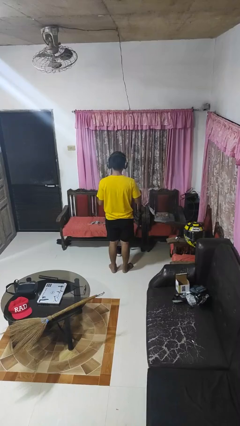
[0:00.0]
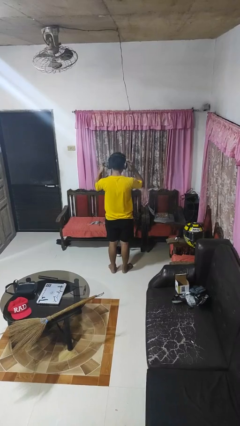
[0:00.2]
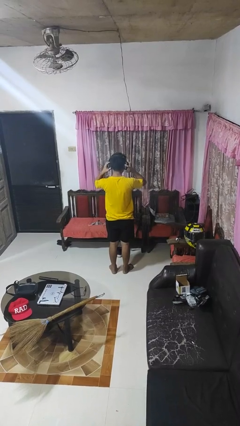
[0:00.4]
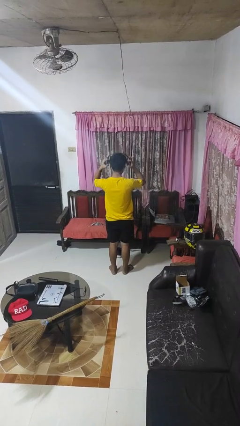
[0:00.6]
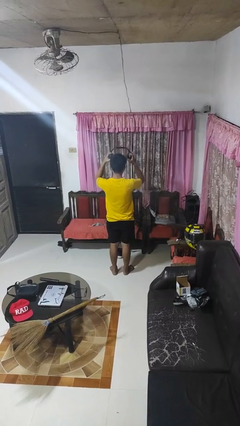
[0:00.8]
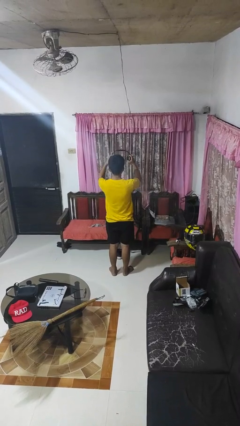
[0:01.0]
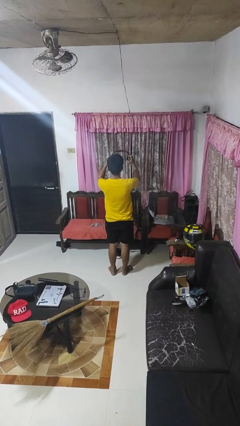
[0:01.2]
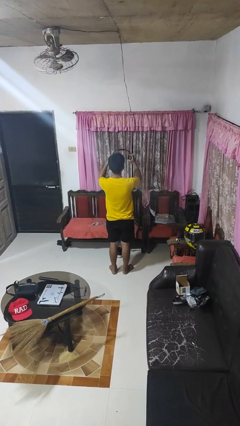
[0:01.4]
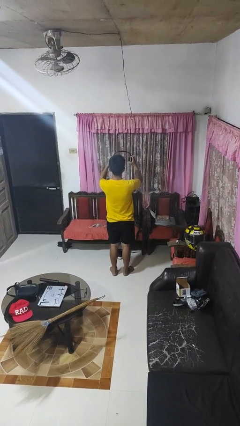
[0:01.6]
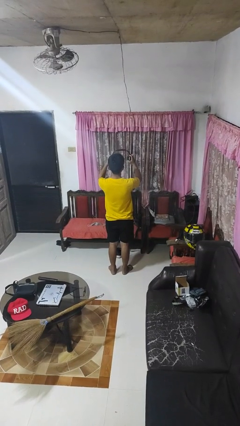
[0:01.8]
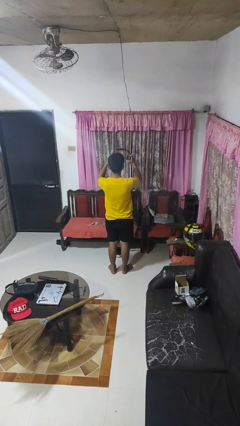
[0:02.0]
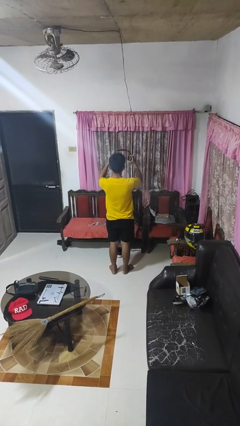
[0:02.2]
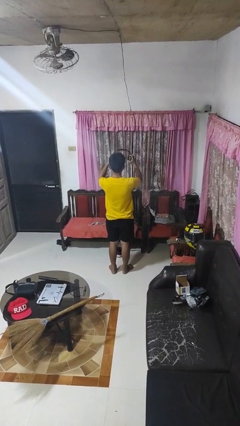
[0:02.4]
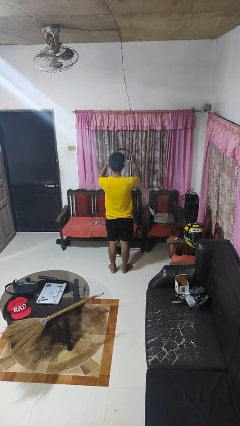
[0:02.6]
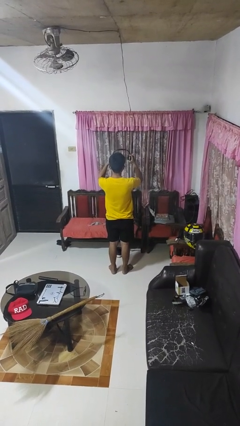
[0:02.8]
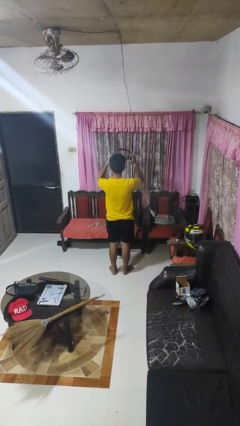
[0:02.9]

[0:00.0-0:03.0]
person takes off headphones

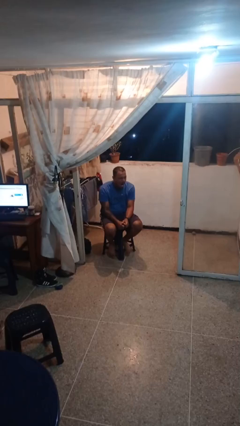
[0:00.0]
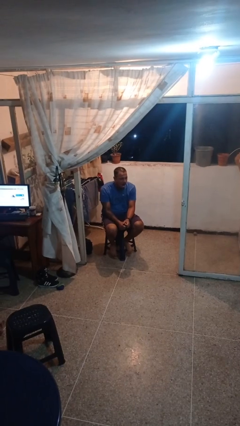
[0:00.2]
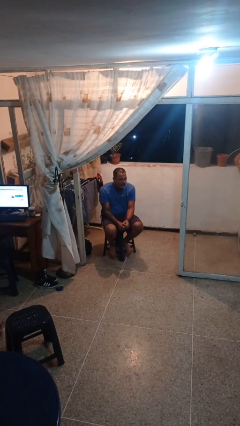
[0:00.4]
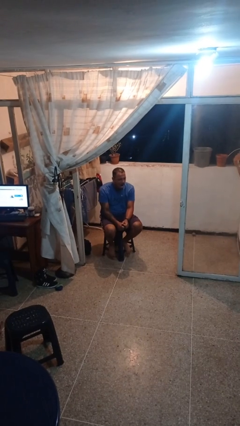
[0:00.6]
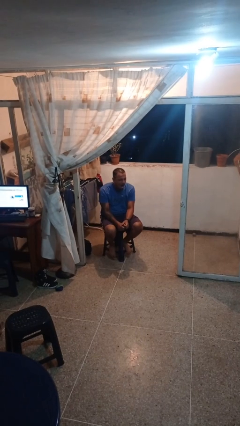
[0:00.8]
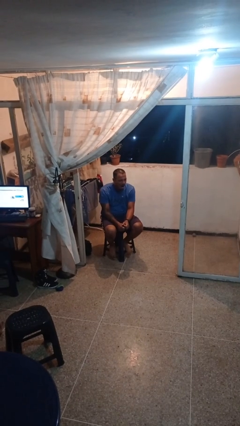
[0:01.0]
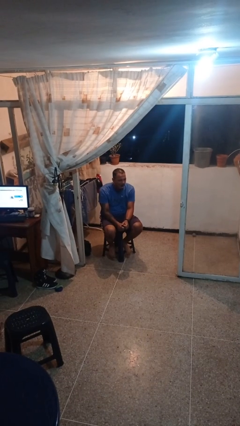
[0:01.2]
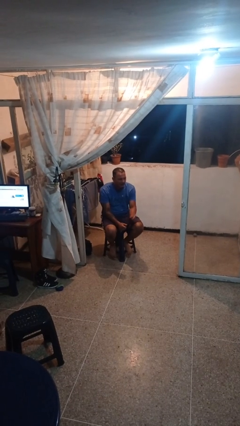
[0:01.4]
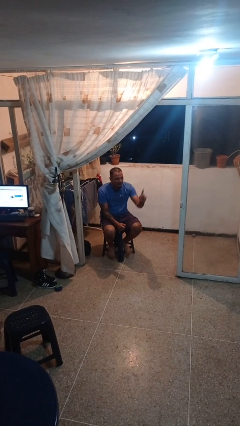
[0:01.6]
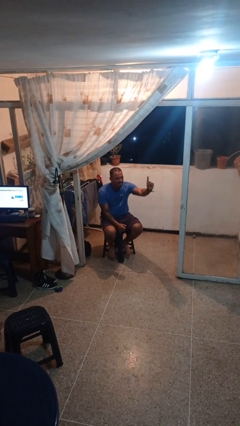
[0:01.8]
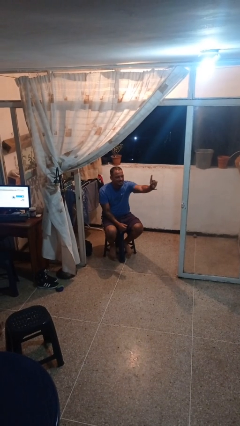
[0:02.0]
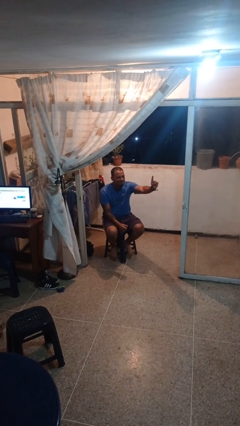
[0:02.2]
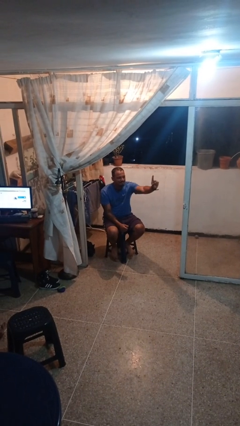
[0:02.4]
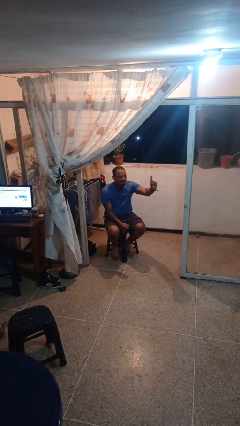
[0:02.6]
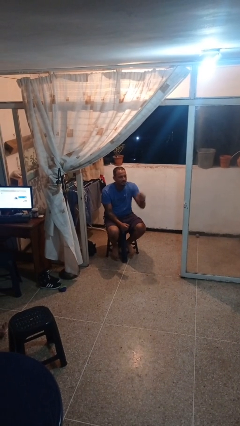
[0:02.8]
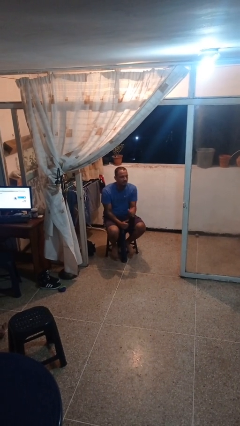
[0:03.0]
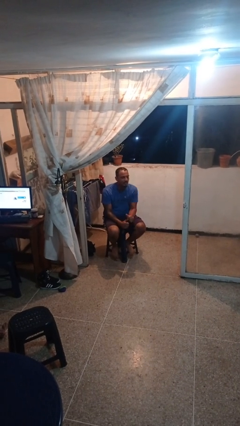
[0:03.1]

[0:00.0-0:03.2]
person gestures number one

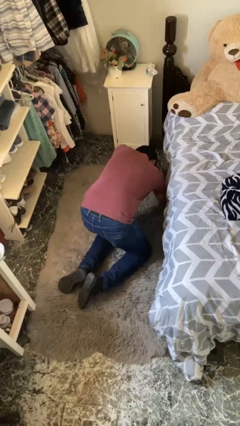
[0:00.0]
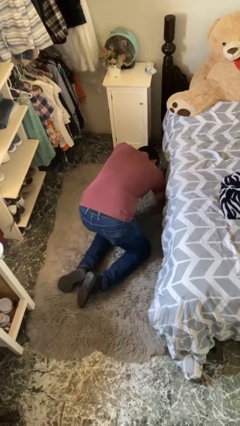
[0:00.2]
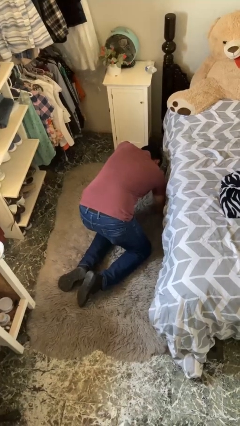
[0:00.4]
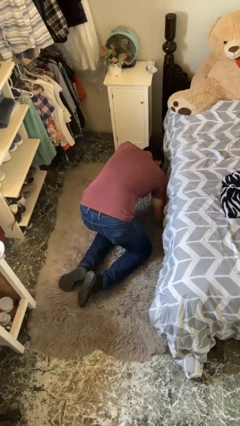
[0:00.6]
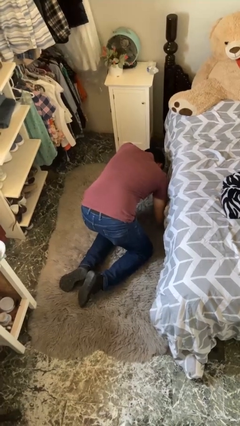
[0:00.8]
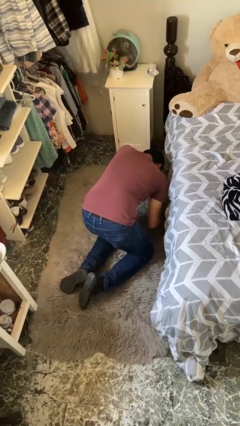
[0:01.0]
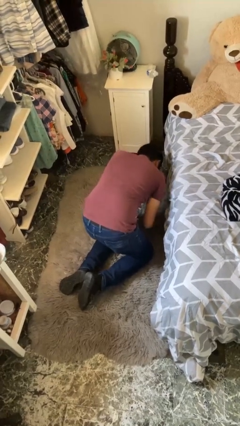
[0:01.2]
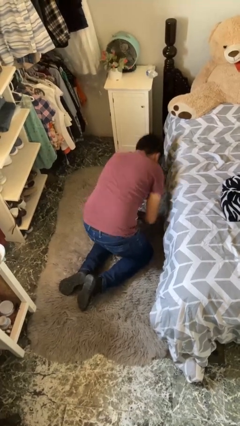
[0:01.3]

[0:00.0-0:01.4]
person searches under bed

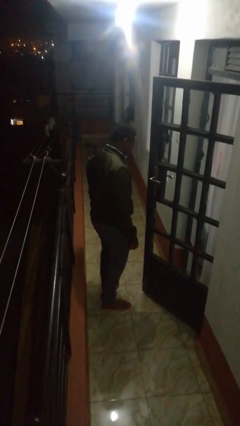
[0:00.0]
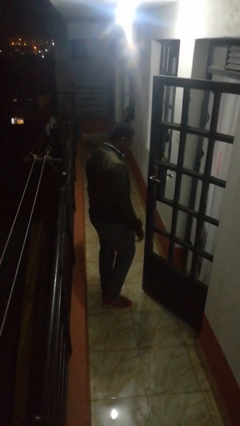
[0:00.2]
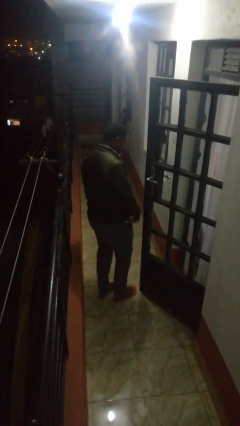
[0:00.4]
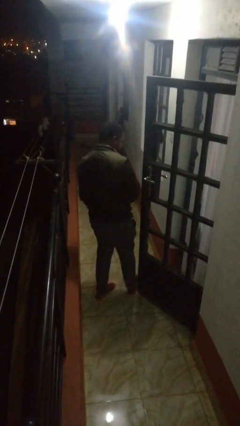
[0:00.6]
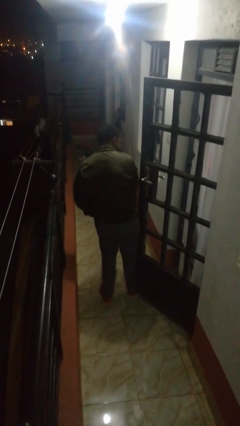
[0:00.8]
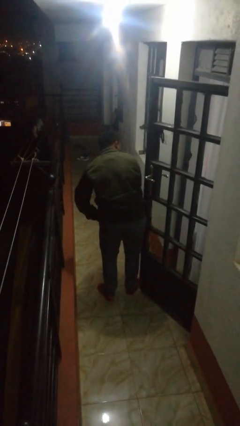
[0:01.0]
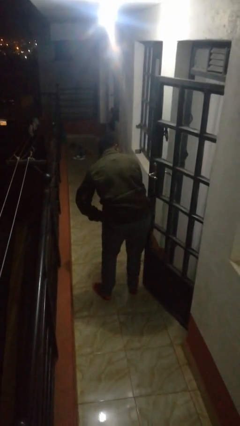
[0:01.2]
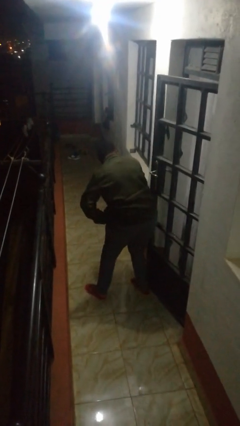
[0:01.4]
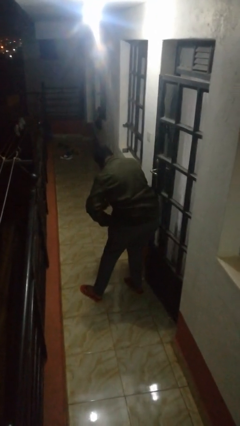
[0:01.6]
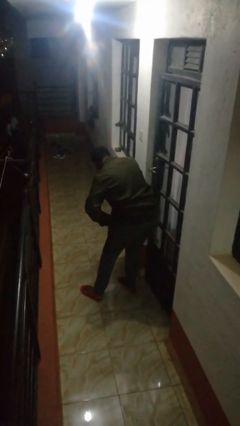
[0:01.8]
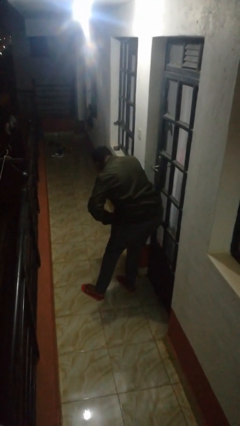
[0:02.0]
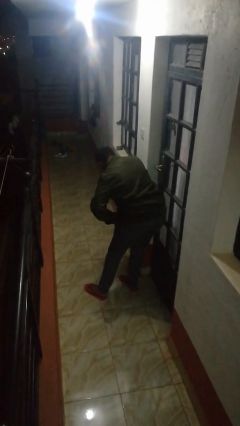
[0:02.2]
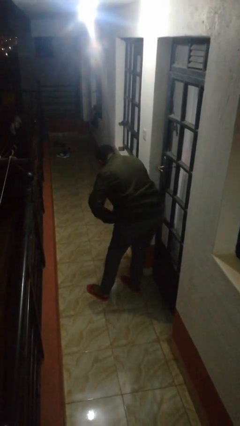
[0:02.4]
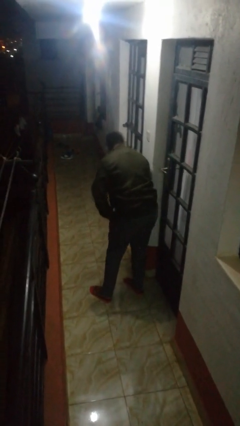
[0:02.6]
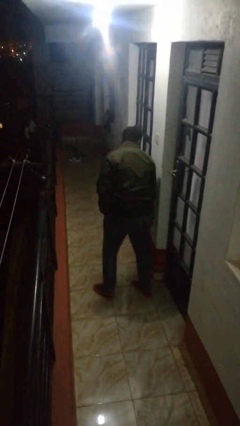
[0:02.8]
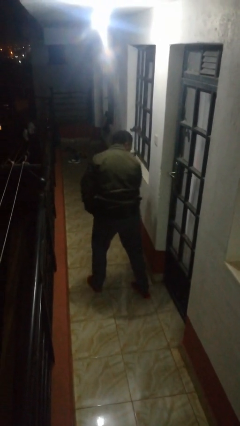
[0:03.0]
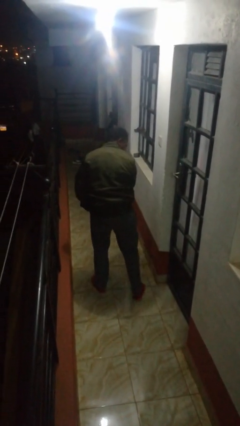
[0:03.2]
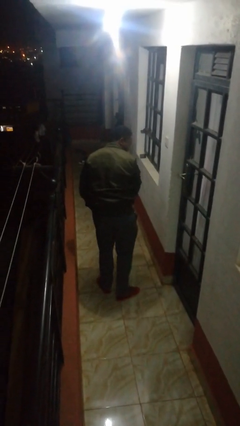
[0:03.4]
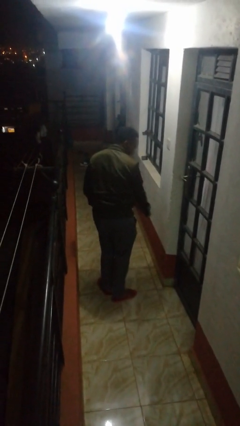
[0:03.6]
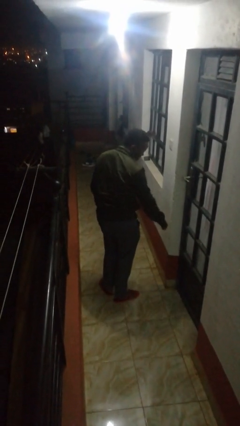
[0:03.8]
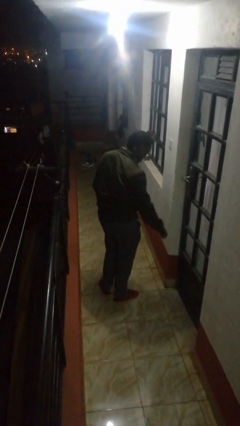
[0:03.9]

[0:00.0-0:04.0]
person closes door with hip

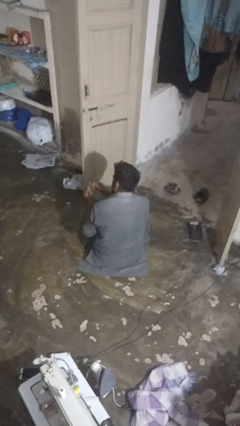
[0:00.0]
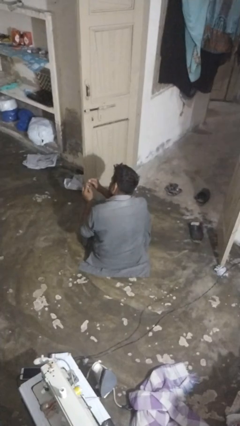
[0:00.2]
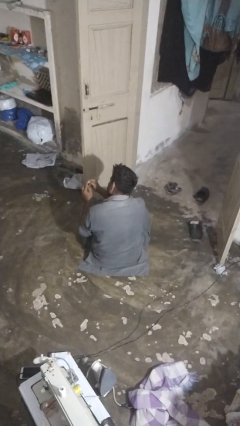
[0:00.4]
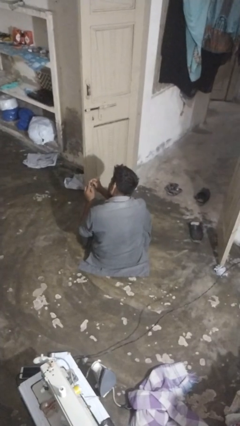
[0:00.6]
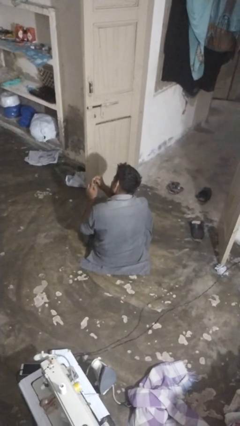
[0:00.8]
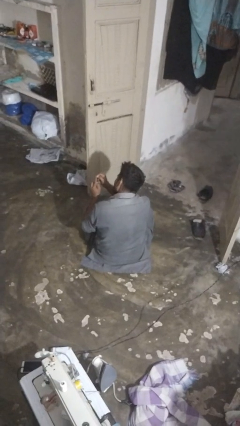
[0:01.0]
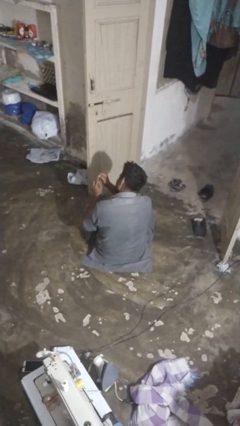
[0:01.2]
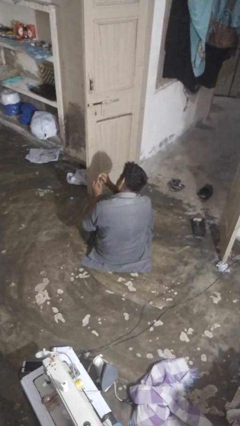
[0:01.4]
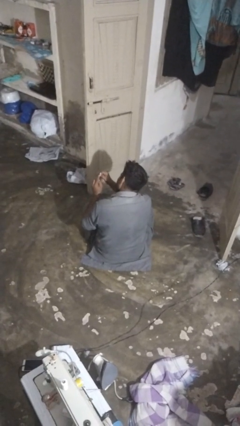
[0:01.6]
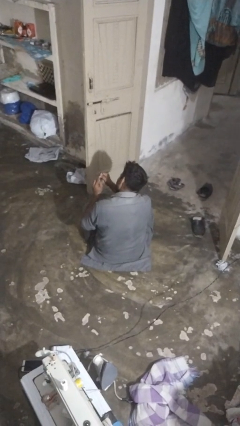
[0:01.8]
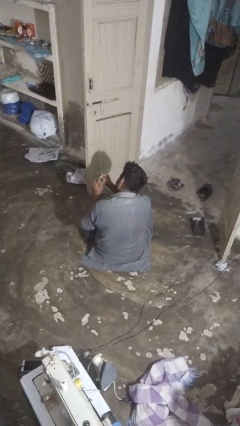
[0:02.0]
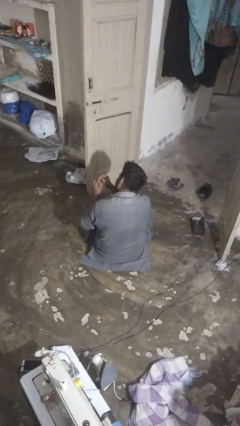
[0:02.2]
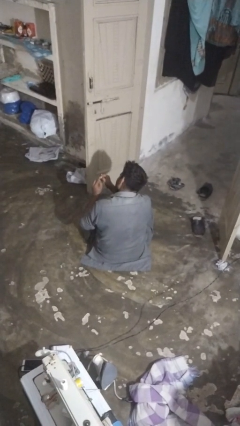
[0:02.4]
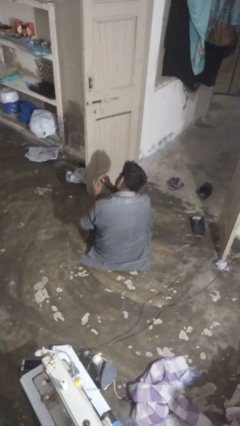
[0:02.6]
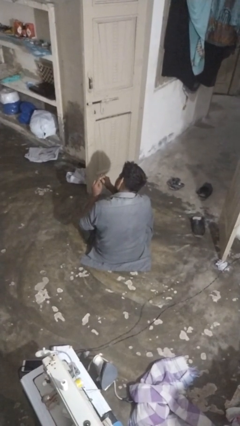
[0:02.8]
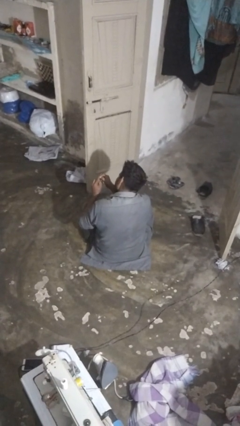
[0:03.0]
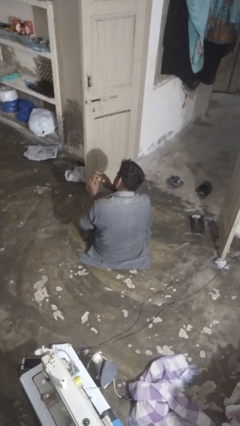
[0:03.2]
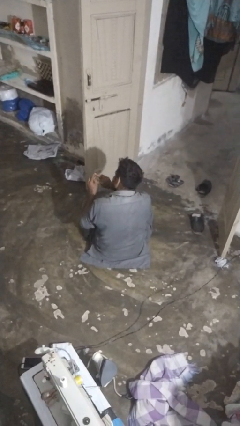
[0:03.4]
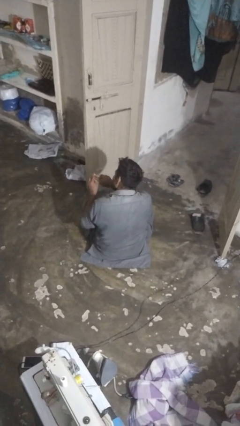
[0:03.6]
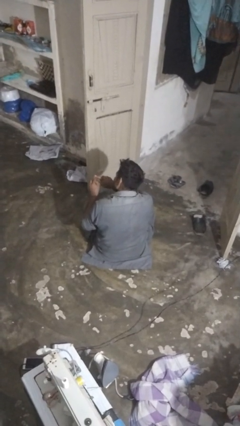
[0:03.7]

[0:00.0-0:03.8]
person files fingernails

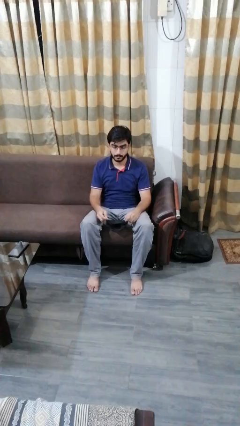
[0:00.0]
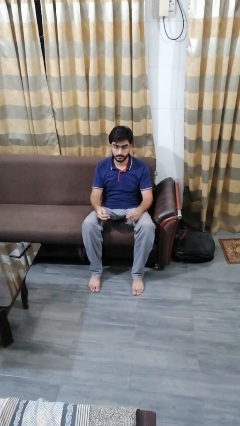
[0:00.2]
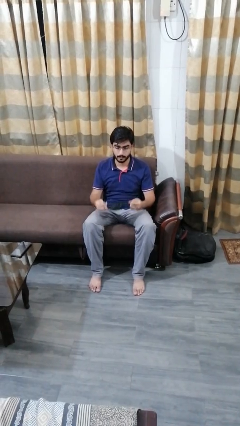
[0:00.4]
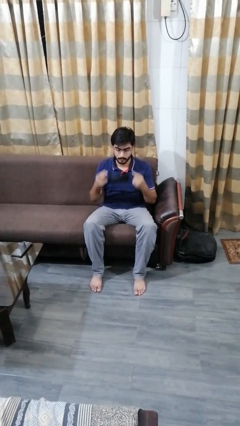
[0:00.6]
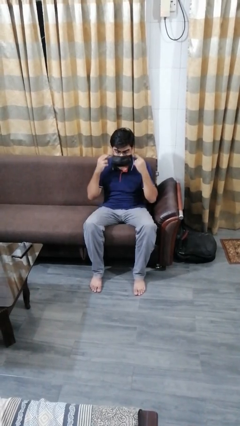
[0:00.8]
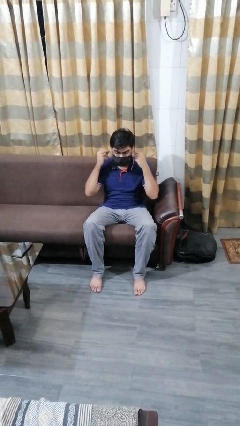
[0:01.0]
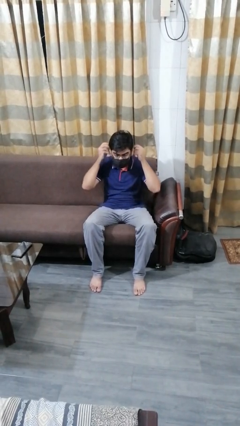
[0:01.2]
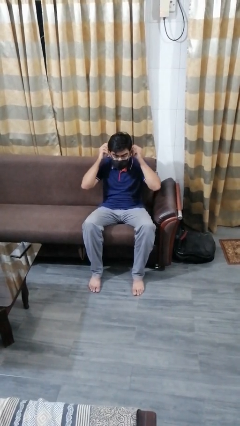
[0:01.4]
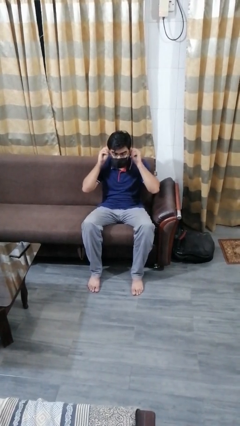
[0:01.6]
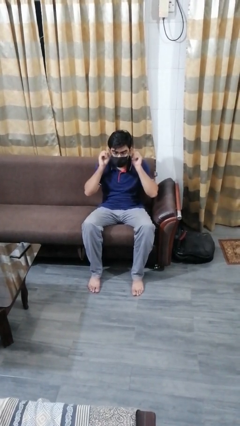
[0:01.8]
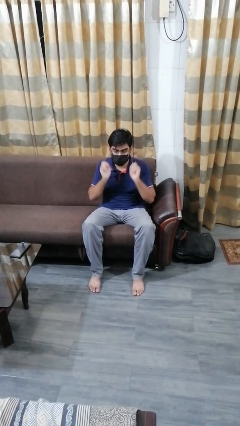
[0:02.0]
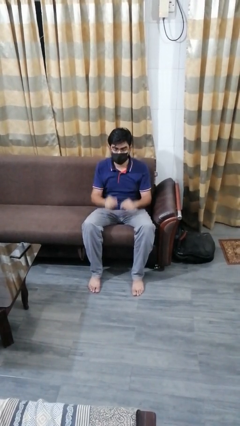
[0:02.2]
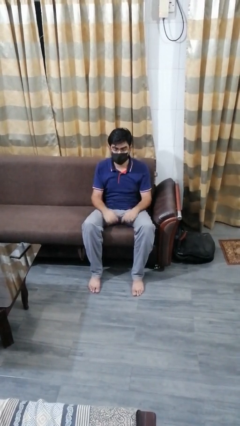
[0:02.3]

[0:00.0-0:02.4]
person puts on facemask
